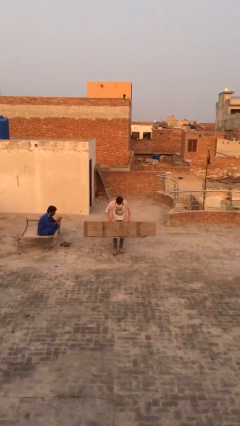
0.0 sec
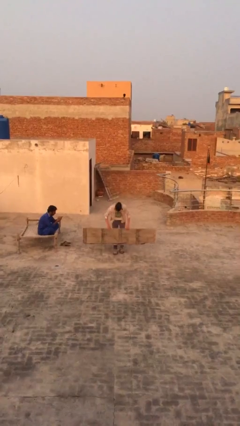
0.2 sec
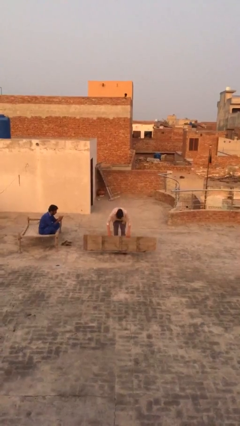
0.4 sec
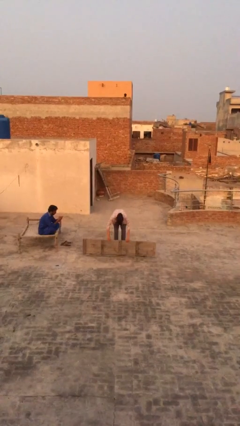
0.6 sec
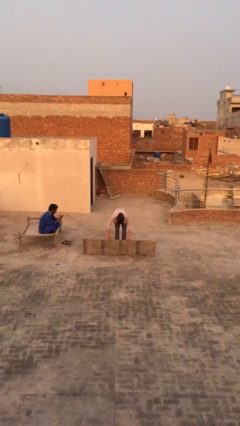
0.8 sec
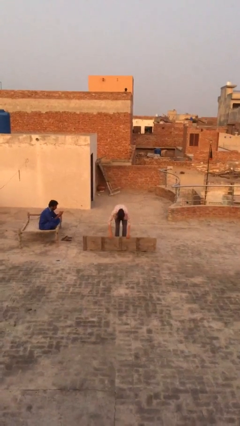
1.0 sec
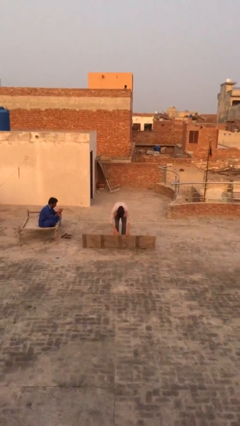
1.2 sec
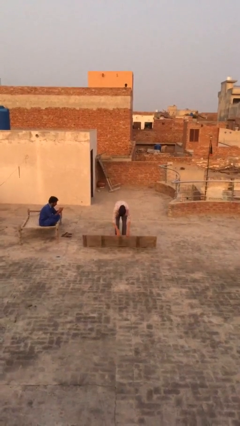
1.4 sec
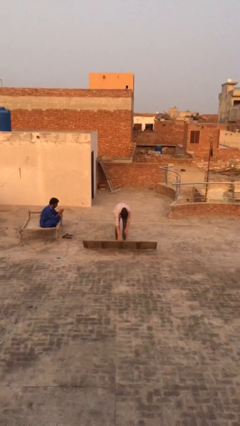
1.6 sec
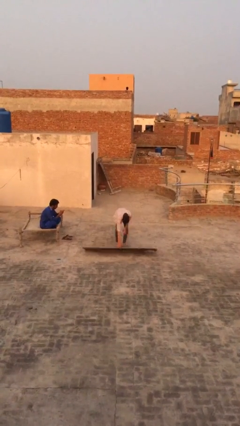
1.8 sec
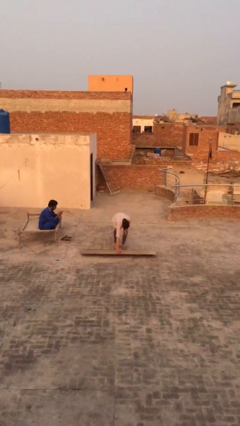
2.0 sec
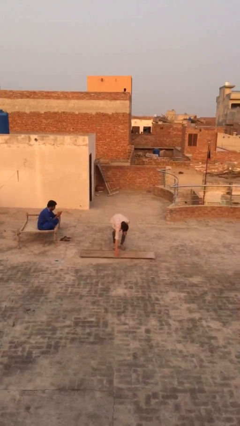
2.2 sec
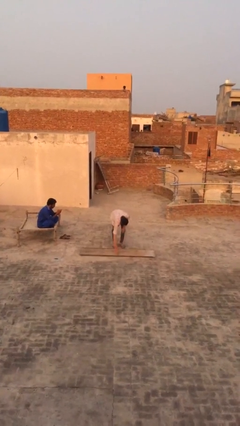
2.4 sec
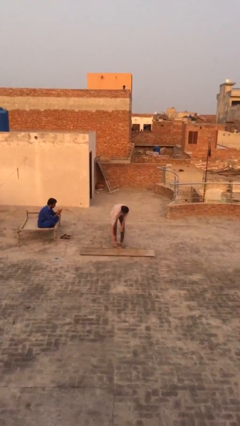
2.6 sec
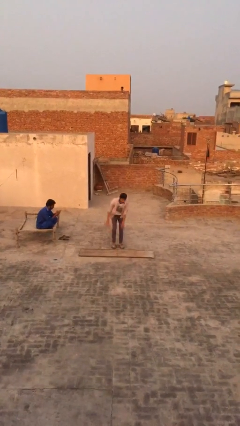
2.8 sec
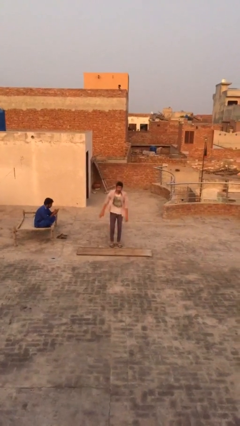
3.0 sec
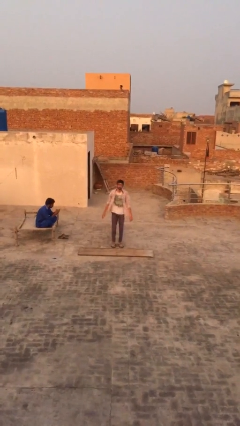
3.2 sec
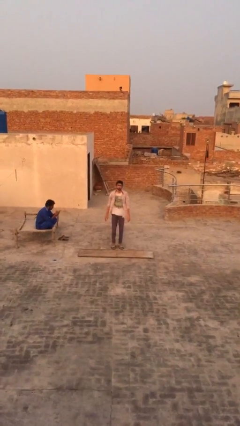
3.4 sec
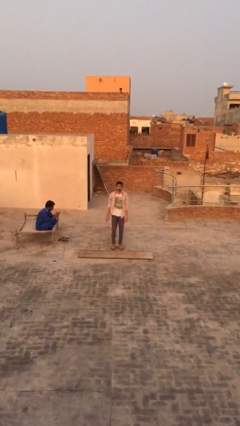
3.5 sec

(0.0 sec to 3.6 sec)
person puts down object on floor

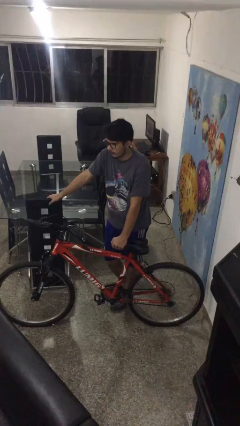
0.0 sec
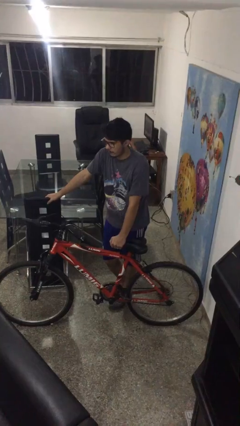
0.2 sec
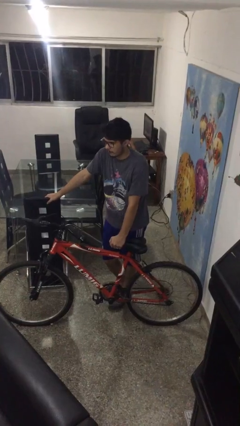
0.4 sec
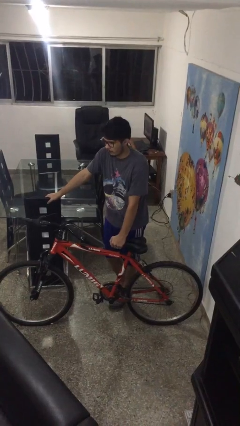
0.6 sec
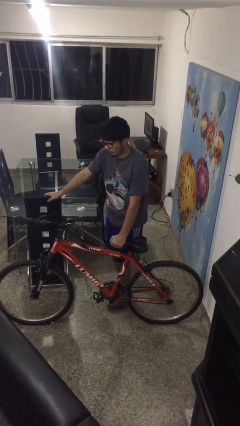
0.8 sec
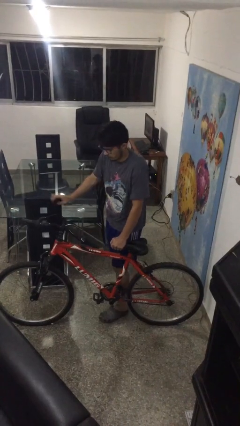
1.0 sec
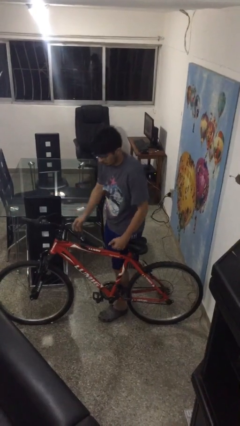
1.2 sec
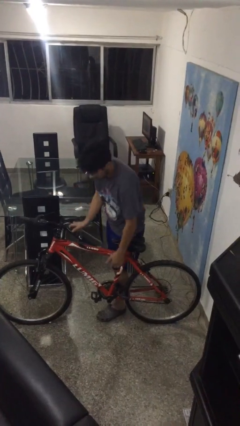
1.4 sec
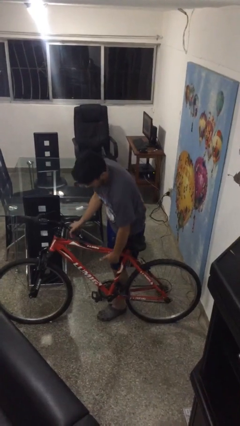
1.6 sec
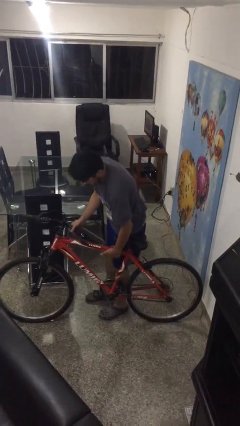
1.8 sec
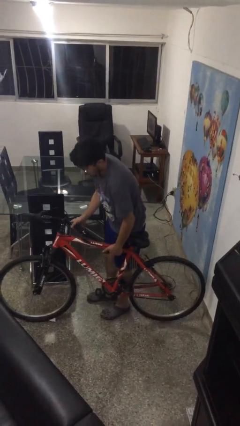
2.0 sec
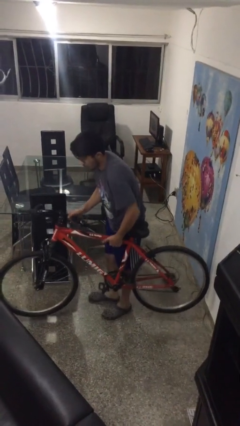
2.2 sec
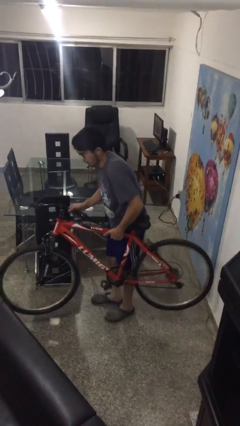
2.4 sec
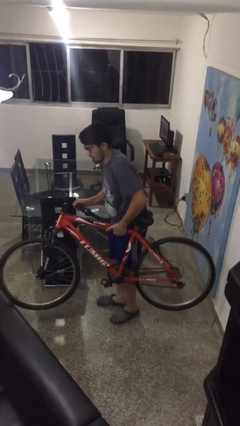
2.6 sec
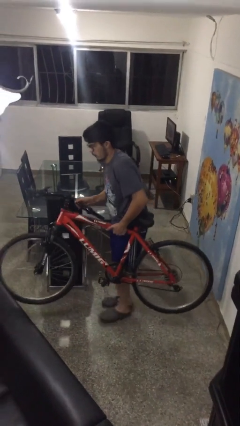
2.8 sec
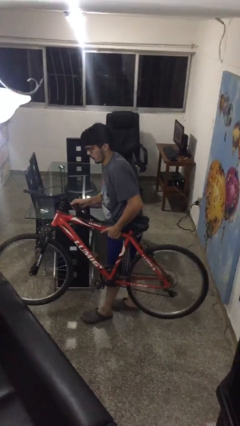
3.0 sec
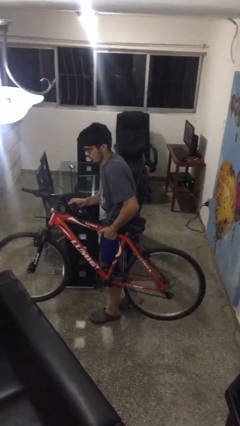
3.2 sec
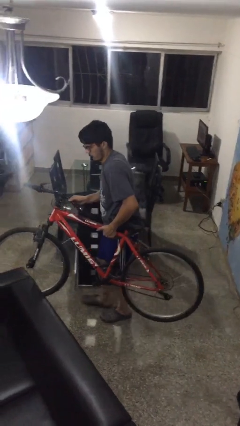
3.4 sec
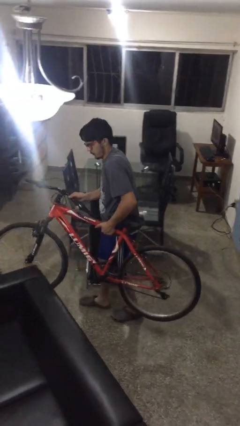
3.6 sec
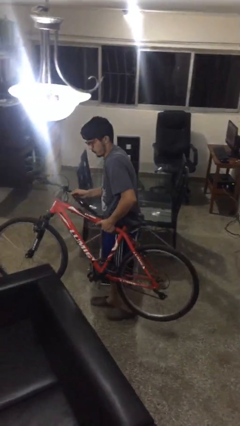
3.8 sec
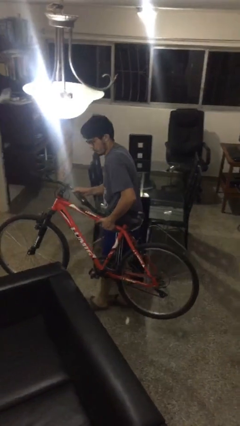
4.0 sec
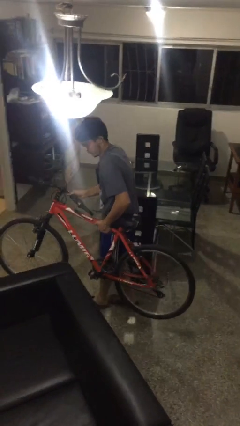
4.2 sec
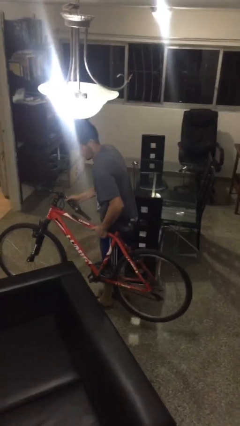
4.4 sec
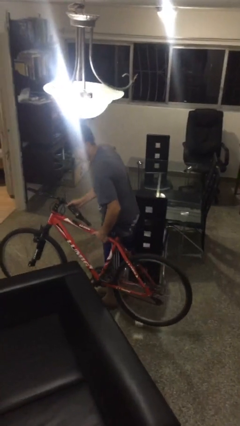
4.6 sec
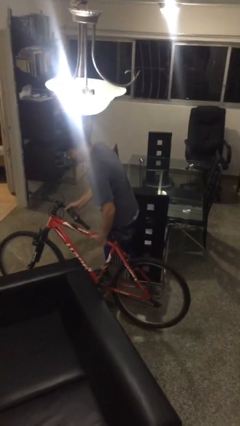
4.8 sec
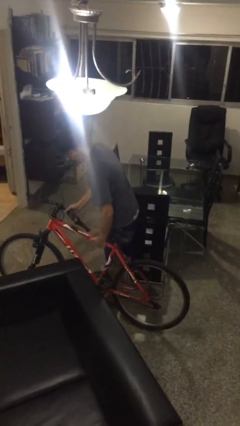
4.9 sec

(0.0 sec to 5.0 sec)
person carries bicycle

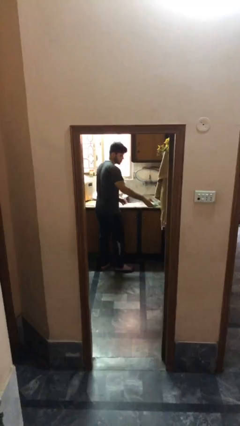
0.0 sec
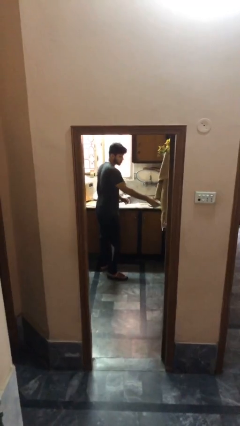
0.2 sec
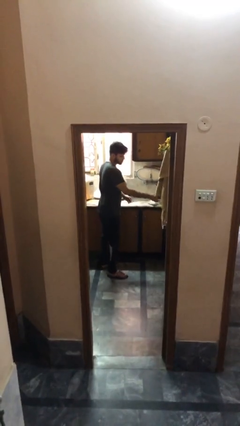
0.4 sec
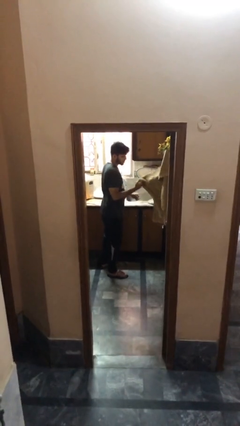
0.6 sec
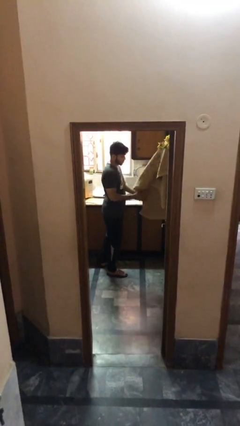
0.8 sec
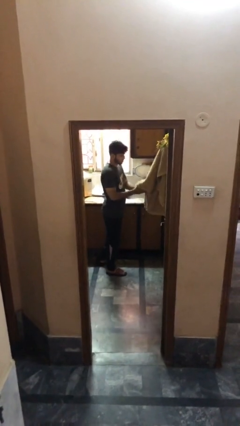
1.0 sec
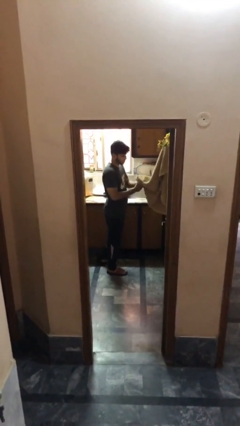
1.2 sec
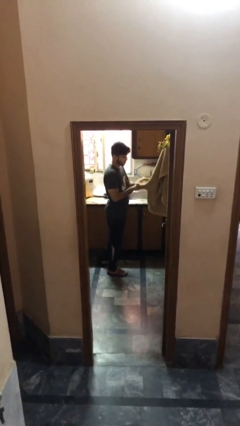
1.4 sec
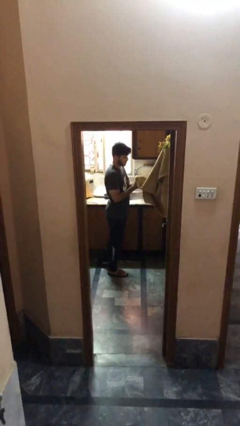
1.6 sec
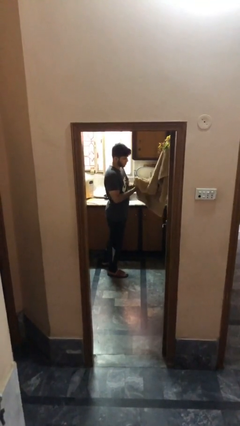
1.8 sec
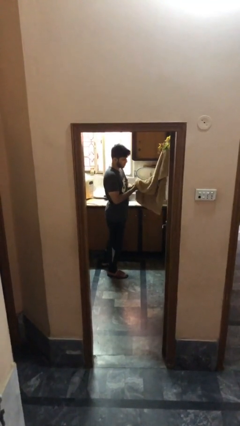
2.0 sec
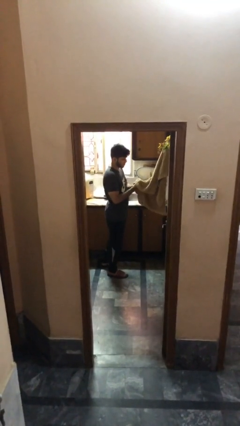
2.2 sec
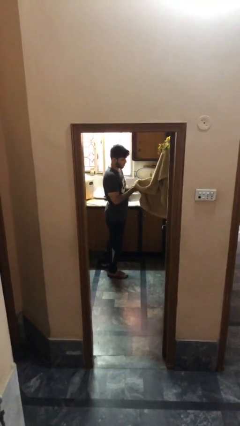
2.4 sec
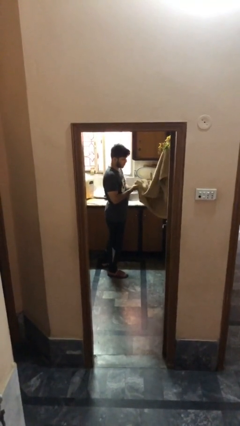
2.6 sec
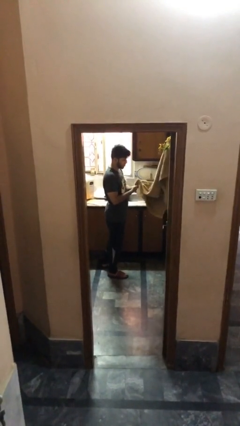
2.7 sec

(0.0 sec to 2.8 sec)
person dries hands with towel

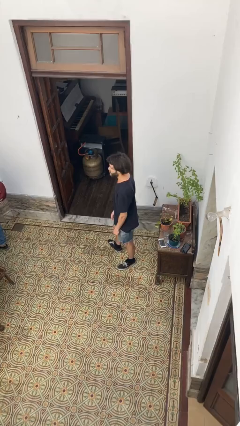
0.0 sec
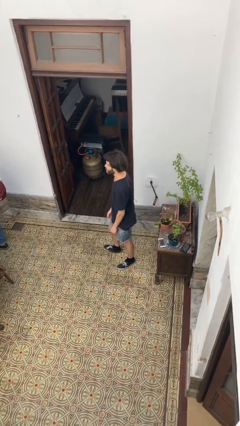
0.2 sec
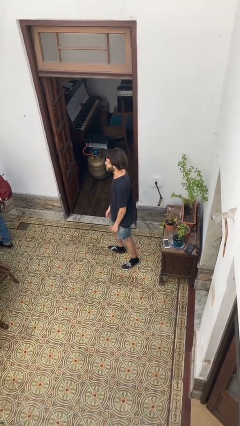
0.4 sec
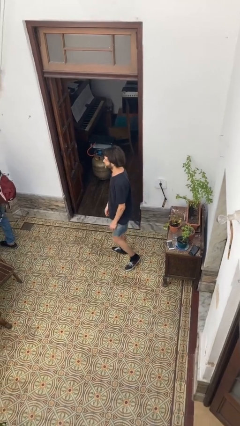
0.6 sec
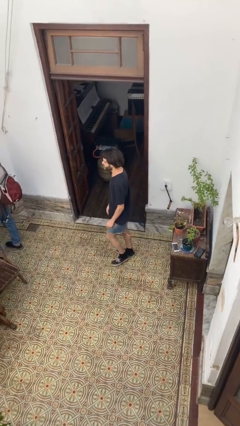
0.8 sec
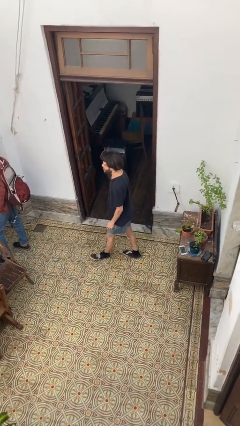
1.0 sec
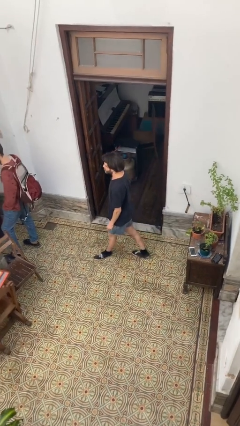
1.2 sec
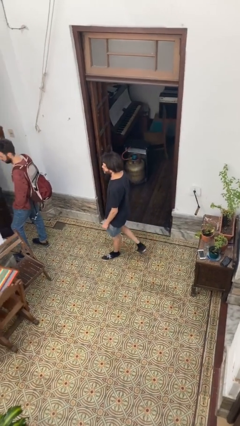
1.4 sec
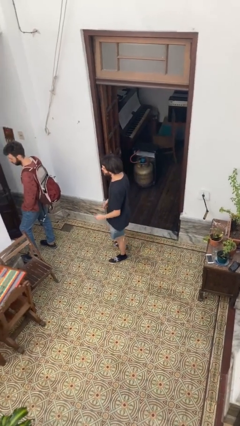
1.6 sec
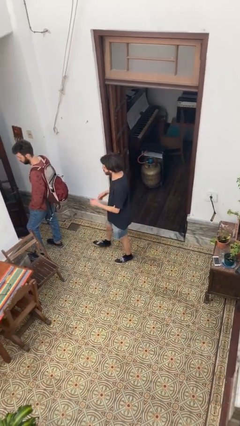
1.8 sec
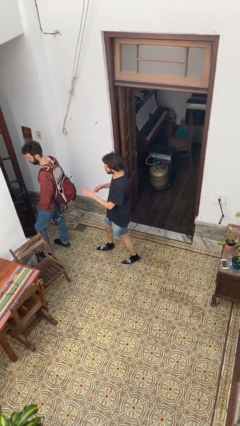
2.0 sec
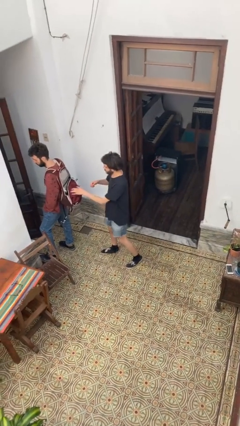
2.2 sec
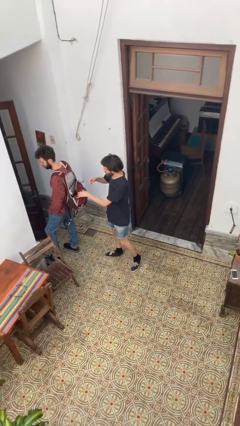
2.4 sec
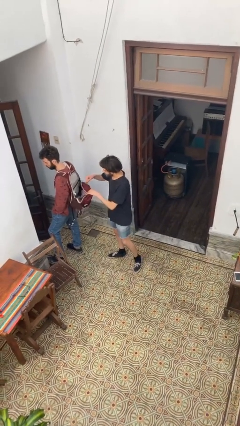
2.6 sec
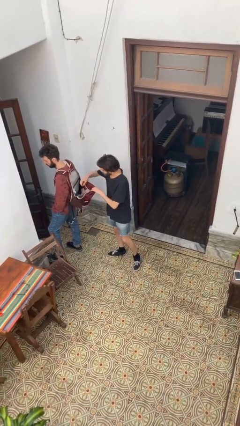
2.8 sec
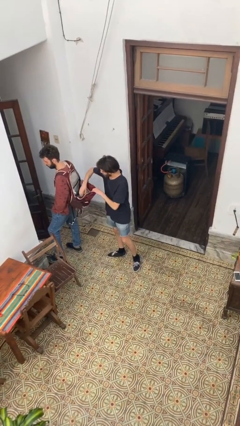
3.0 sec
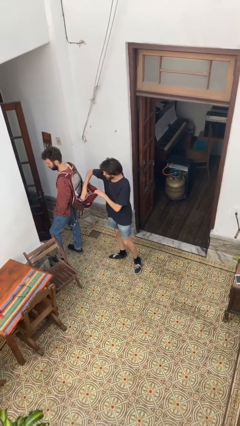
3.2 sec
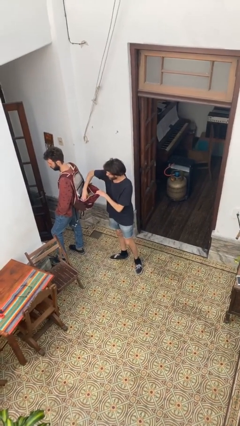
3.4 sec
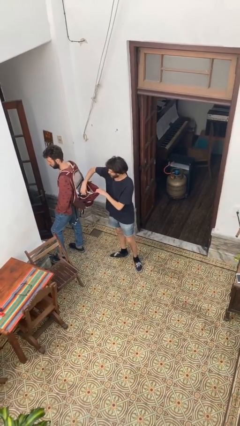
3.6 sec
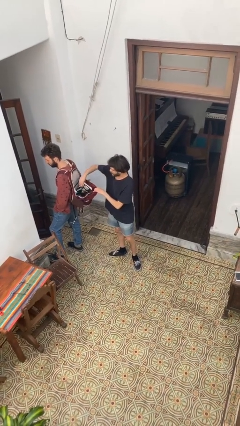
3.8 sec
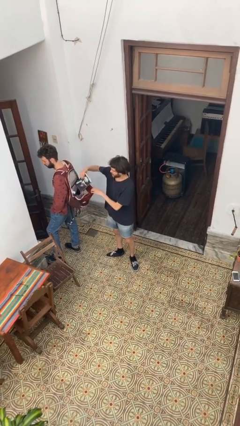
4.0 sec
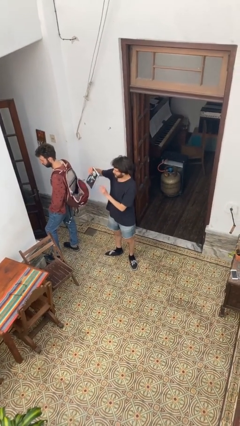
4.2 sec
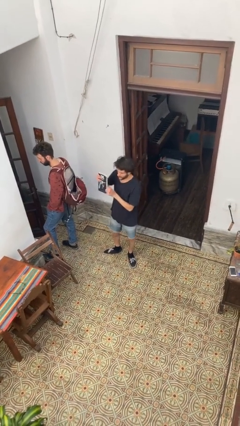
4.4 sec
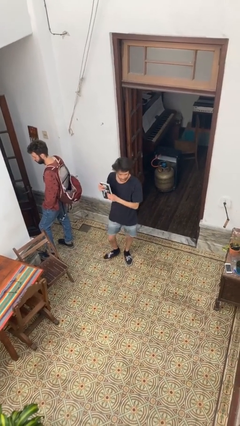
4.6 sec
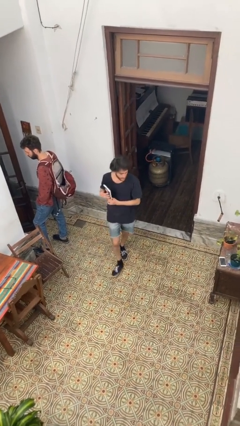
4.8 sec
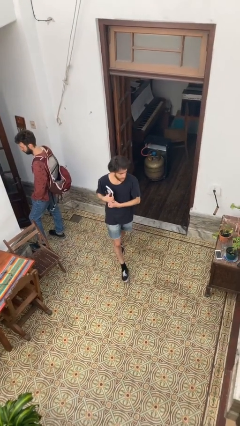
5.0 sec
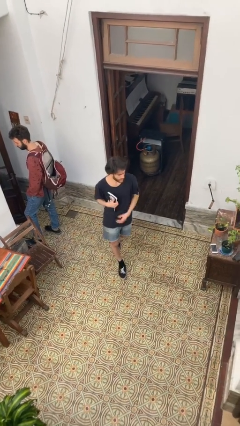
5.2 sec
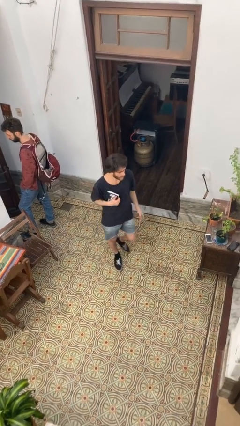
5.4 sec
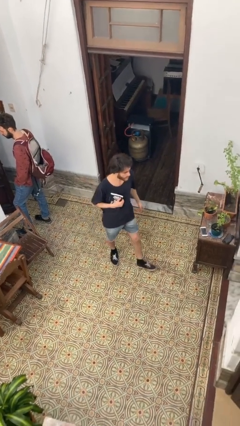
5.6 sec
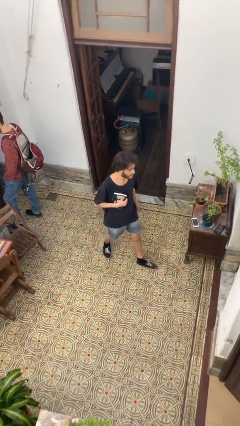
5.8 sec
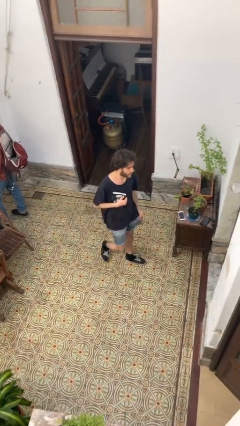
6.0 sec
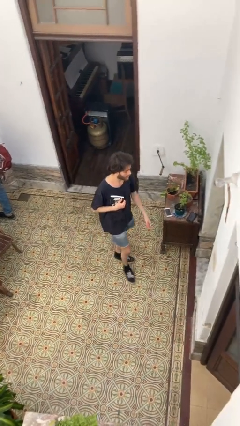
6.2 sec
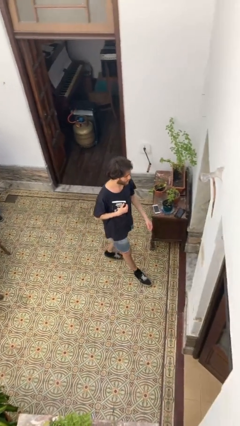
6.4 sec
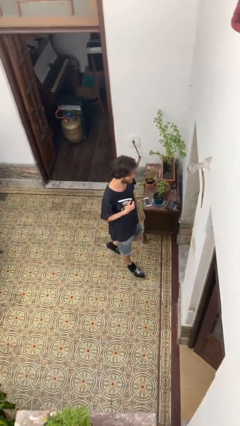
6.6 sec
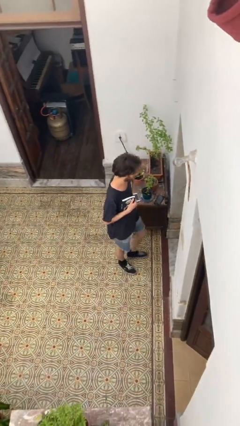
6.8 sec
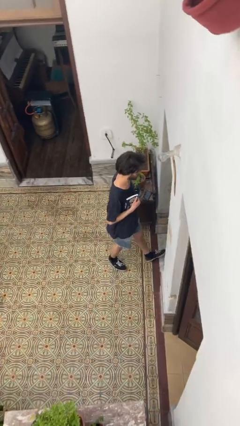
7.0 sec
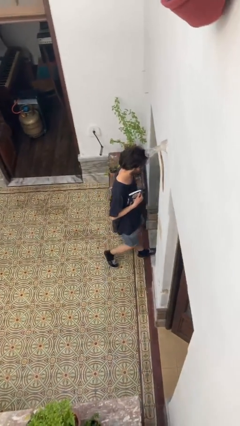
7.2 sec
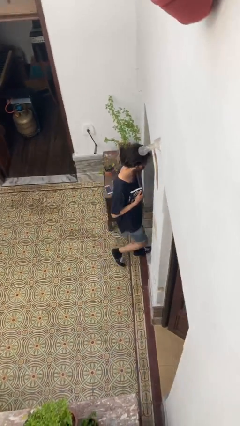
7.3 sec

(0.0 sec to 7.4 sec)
person steals object from person
